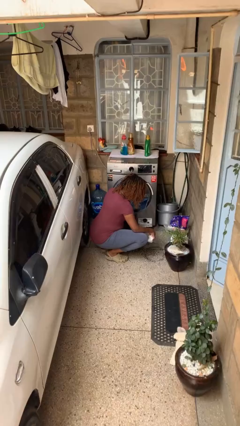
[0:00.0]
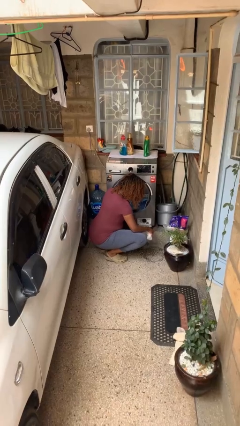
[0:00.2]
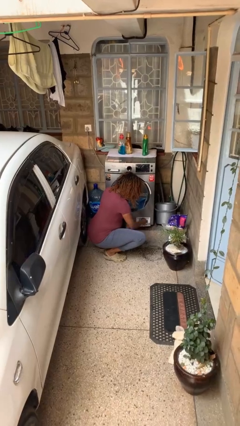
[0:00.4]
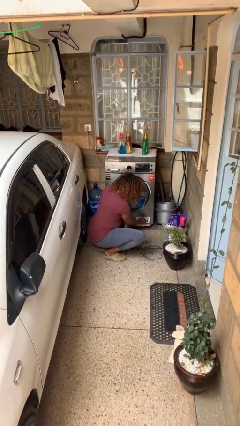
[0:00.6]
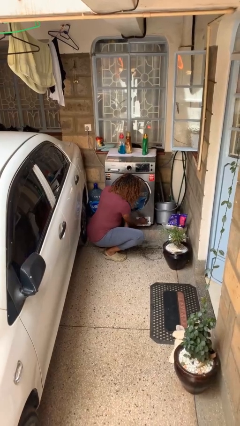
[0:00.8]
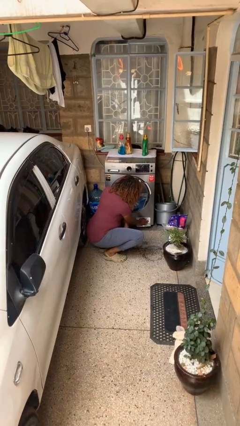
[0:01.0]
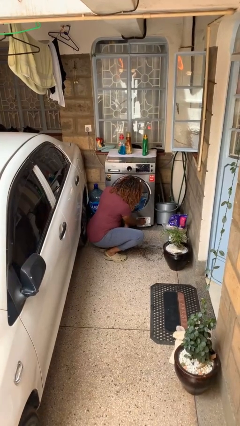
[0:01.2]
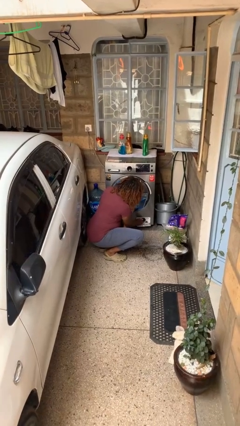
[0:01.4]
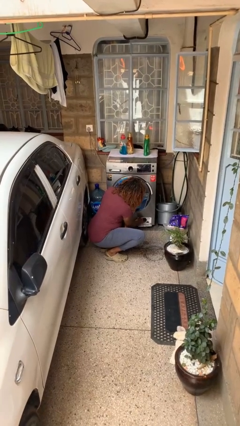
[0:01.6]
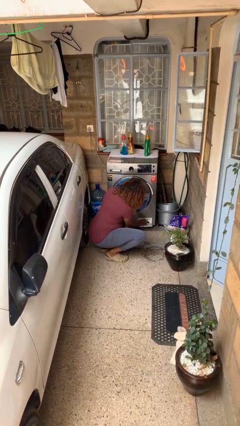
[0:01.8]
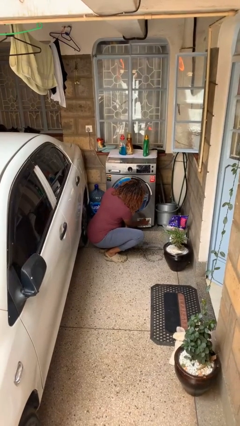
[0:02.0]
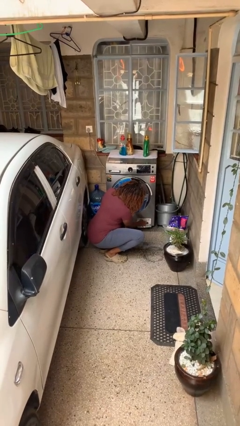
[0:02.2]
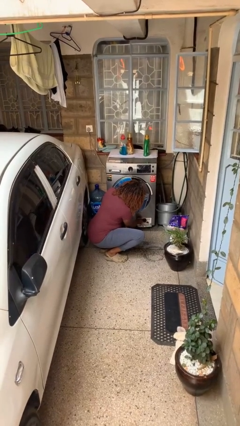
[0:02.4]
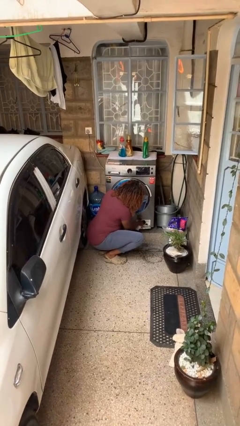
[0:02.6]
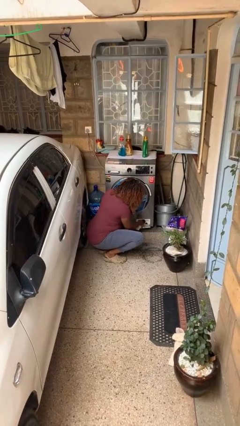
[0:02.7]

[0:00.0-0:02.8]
person cleans dryer lint trap

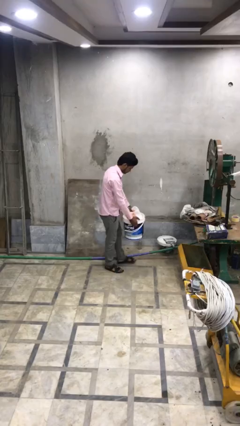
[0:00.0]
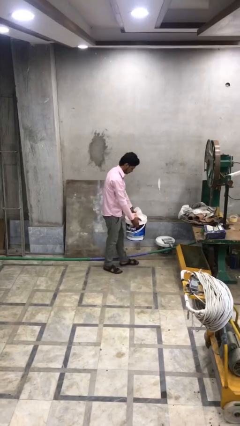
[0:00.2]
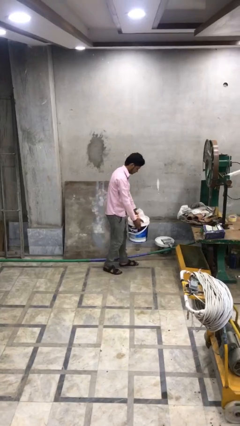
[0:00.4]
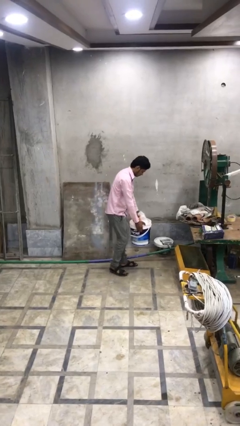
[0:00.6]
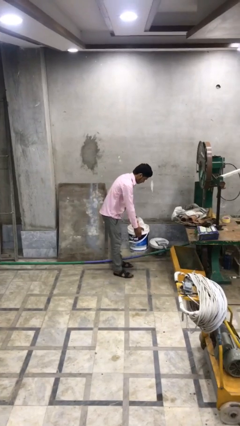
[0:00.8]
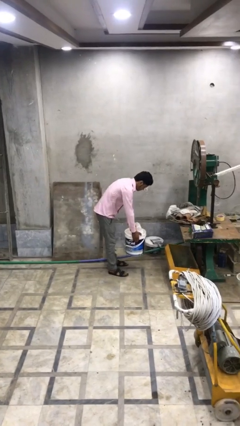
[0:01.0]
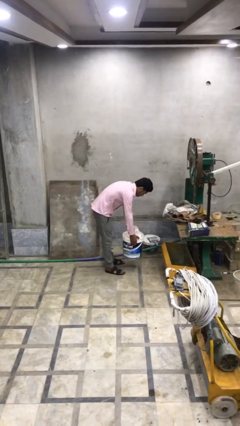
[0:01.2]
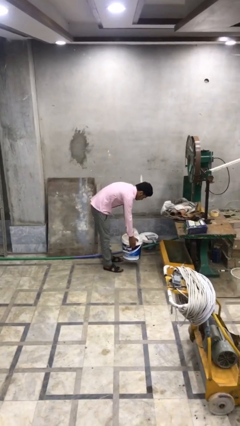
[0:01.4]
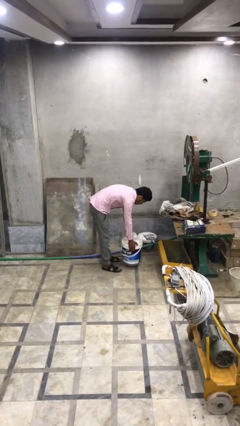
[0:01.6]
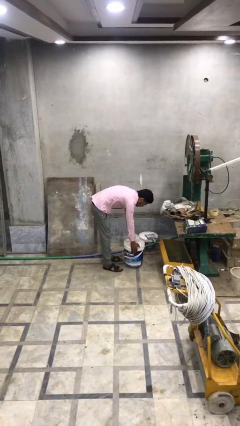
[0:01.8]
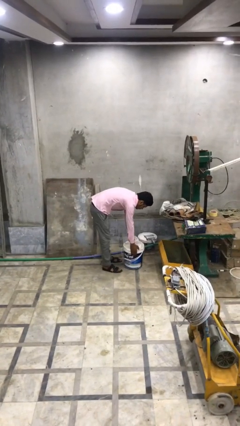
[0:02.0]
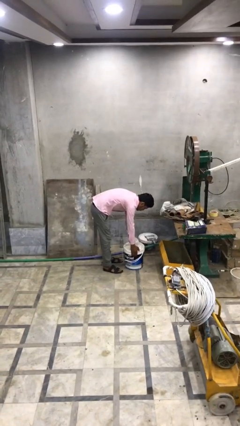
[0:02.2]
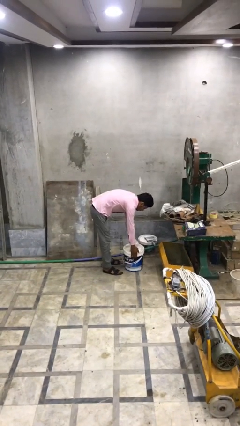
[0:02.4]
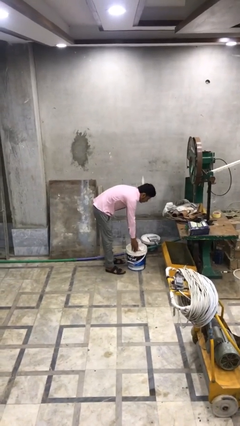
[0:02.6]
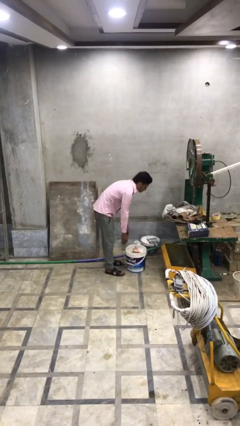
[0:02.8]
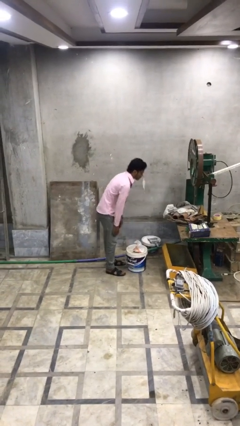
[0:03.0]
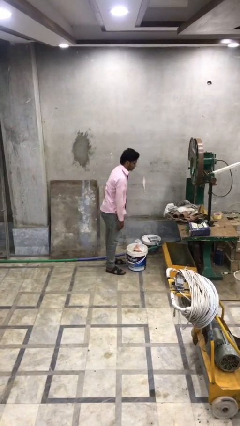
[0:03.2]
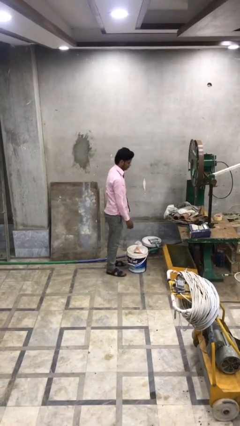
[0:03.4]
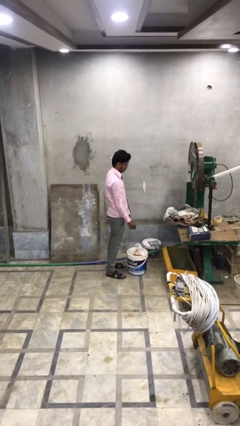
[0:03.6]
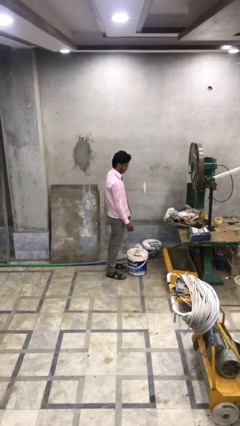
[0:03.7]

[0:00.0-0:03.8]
person puts down object on floor

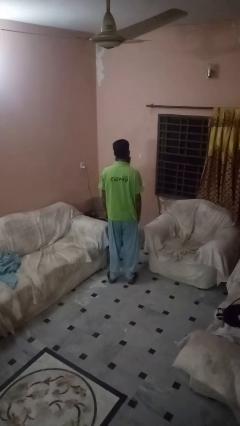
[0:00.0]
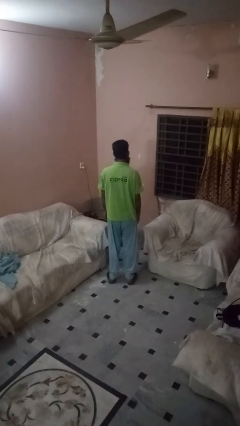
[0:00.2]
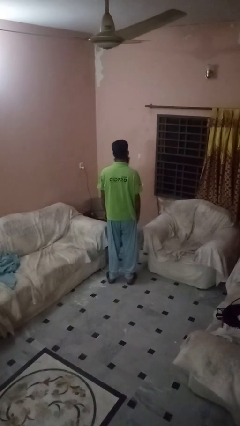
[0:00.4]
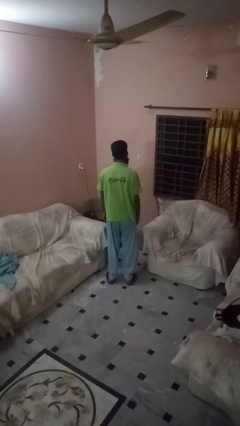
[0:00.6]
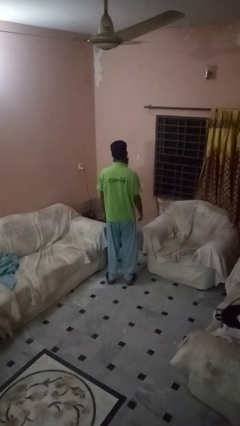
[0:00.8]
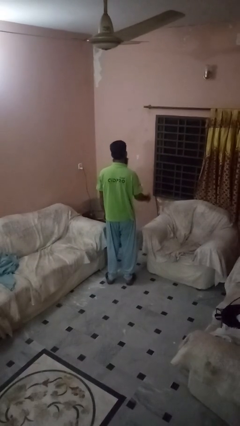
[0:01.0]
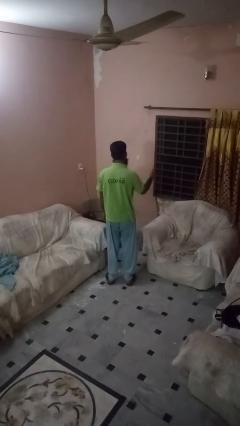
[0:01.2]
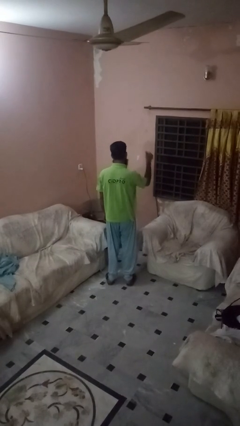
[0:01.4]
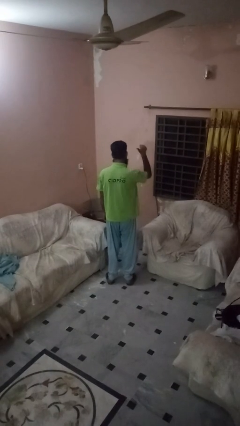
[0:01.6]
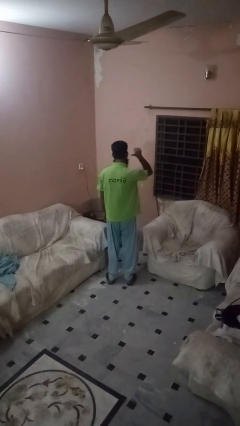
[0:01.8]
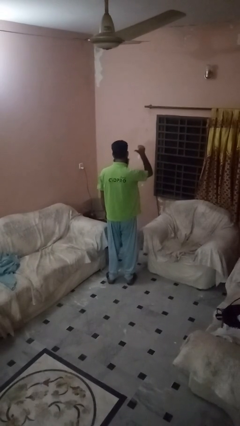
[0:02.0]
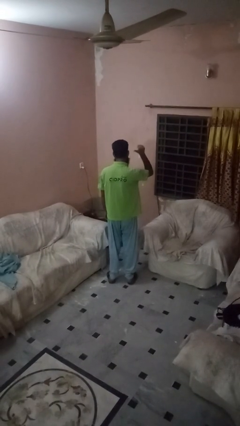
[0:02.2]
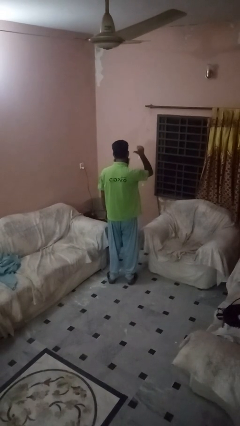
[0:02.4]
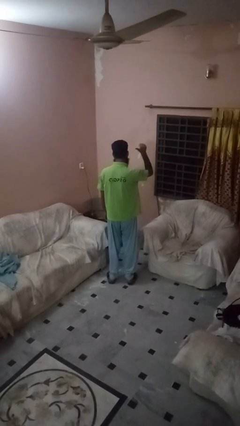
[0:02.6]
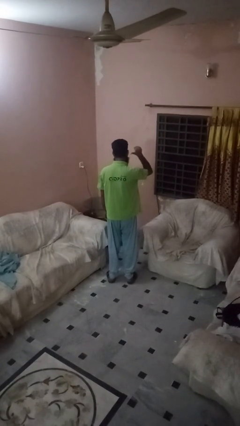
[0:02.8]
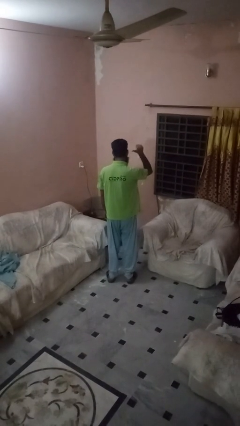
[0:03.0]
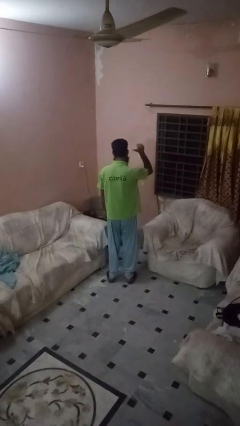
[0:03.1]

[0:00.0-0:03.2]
person gestures behind me

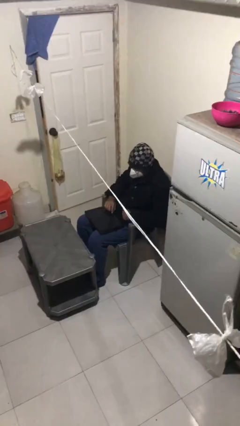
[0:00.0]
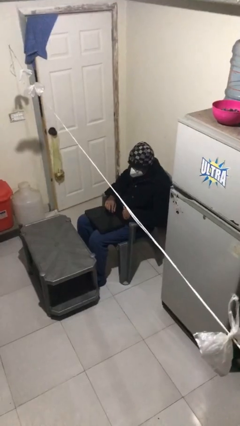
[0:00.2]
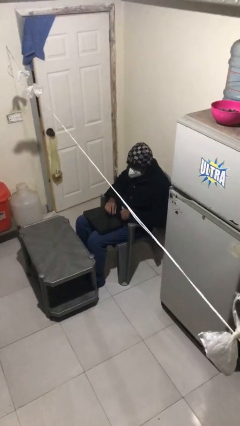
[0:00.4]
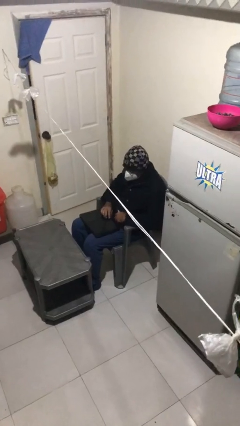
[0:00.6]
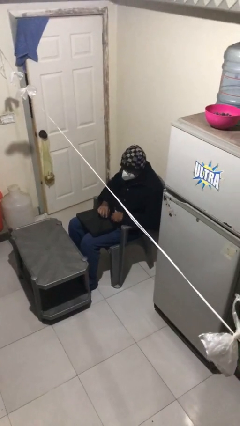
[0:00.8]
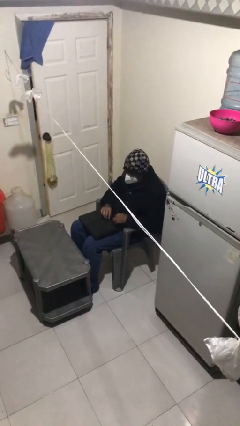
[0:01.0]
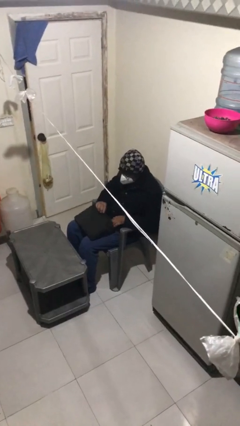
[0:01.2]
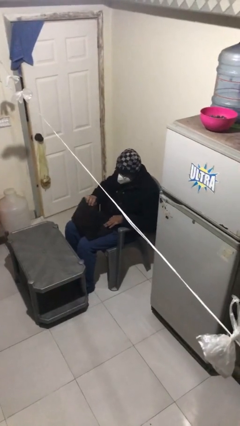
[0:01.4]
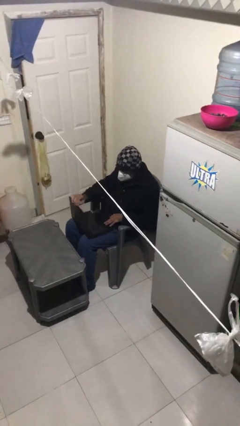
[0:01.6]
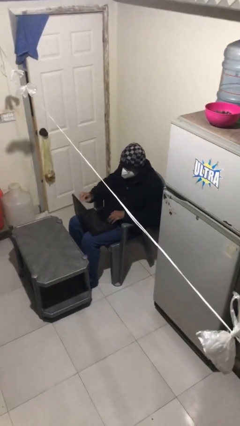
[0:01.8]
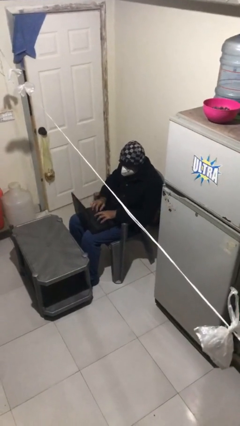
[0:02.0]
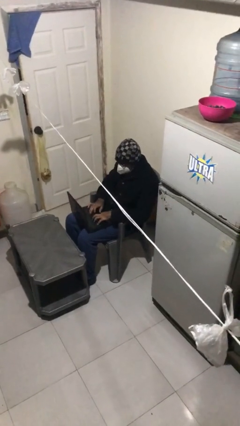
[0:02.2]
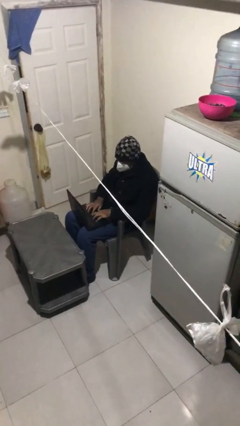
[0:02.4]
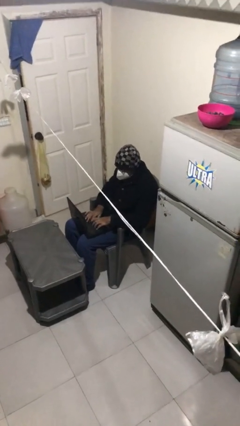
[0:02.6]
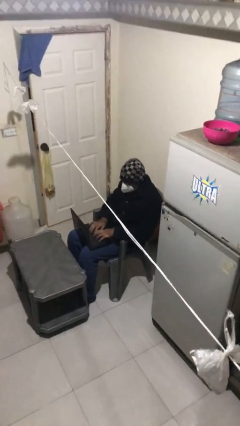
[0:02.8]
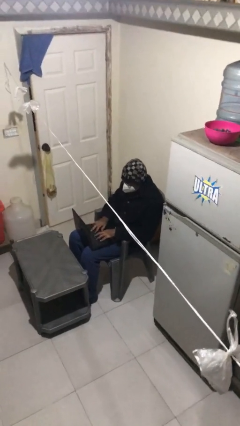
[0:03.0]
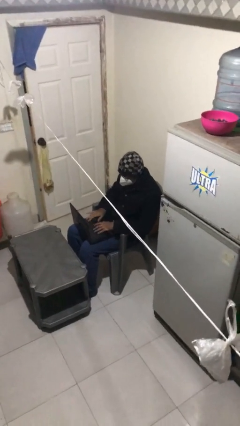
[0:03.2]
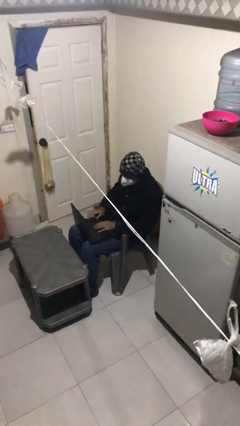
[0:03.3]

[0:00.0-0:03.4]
person interacts with laptop

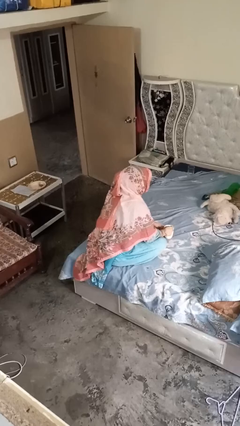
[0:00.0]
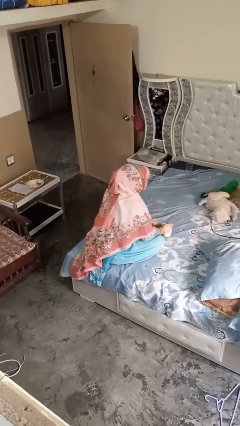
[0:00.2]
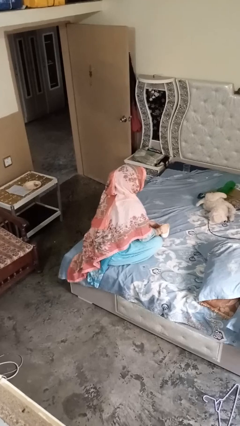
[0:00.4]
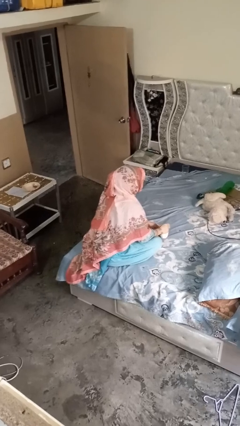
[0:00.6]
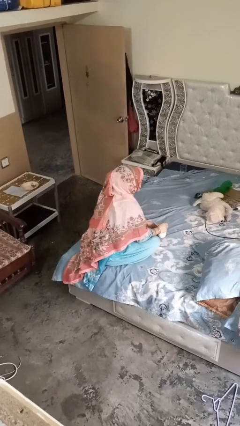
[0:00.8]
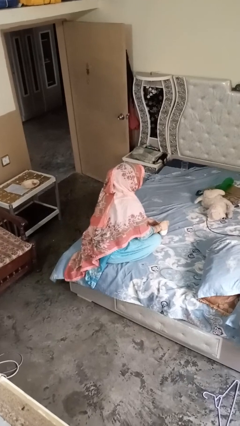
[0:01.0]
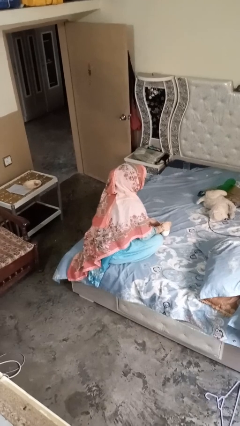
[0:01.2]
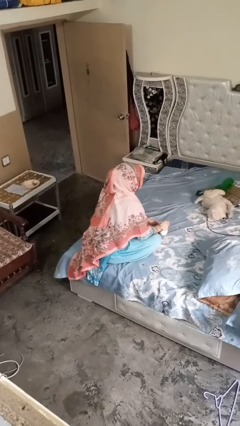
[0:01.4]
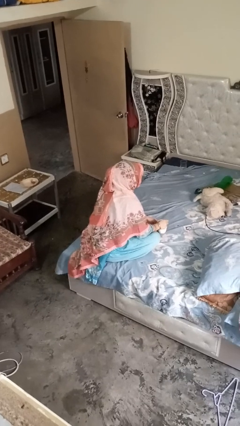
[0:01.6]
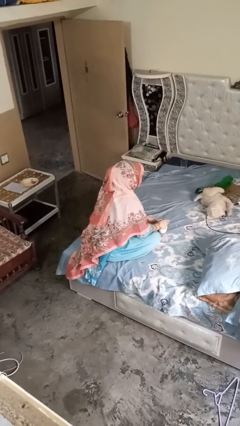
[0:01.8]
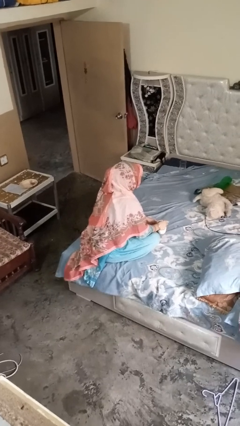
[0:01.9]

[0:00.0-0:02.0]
person stirs mug

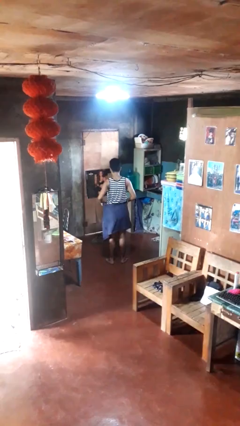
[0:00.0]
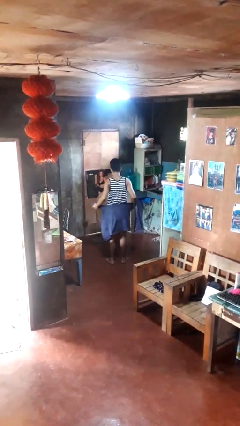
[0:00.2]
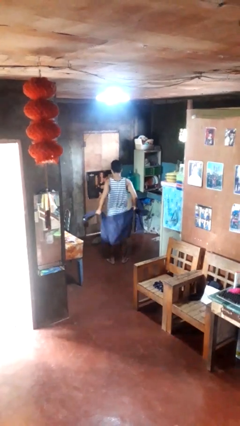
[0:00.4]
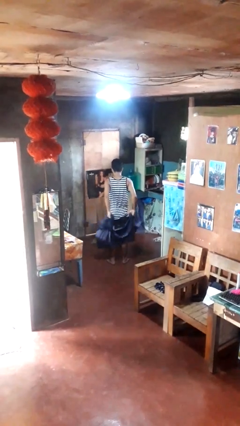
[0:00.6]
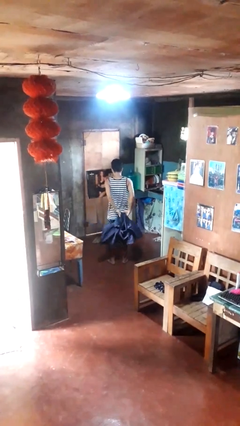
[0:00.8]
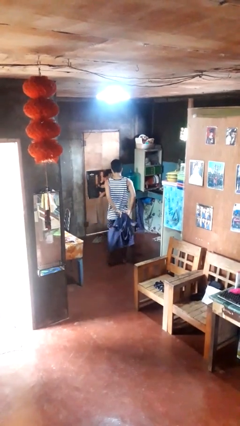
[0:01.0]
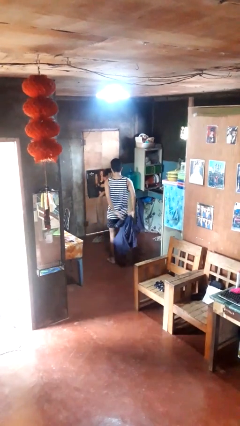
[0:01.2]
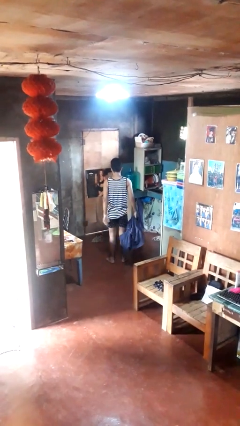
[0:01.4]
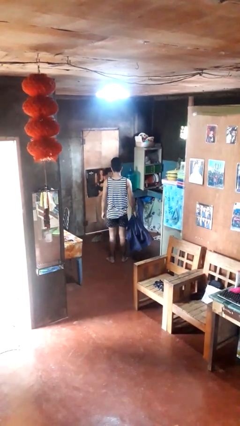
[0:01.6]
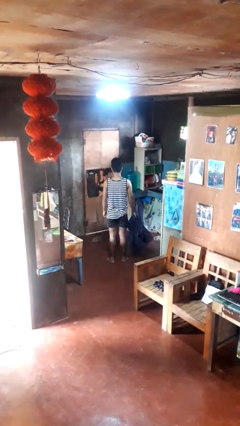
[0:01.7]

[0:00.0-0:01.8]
person unties jacket around waist
